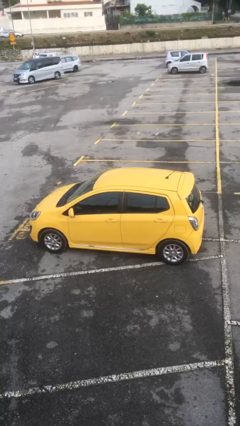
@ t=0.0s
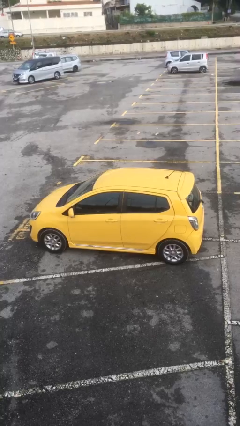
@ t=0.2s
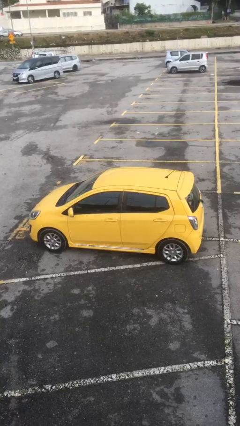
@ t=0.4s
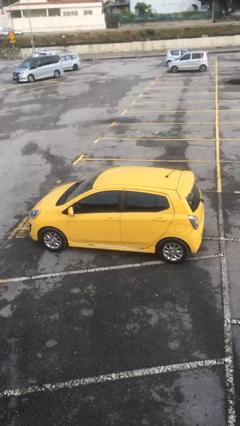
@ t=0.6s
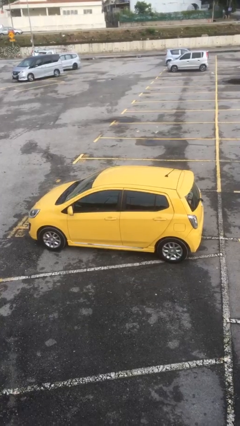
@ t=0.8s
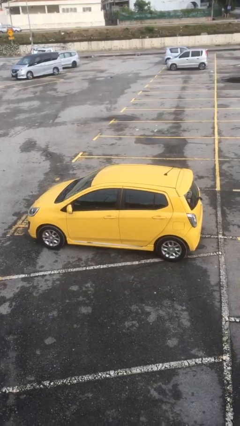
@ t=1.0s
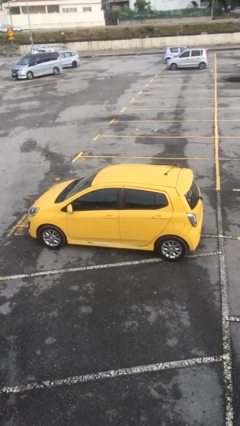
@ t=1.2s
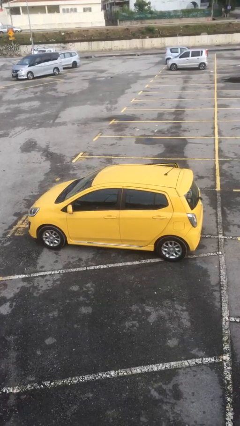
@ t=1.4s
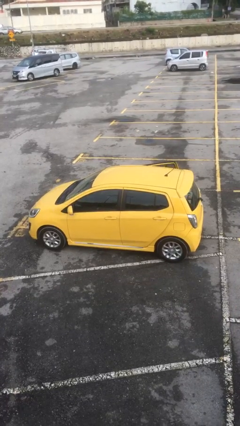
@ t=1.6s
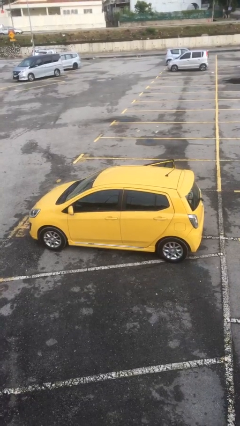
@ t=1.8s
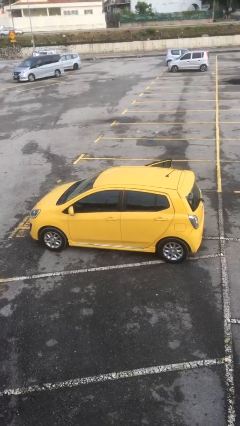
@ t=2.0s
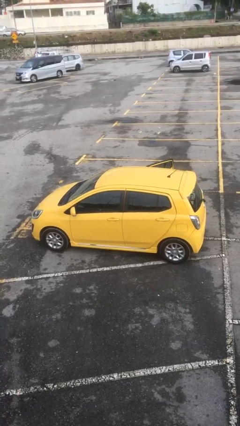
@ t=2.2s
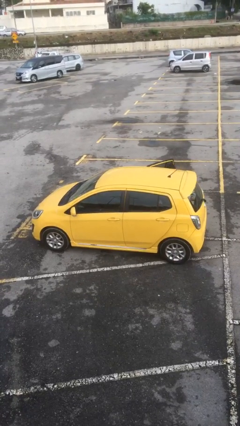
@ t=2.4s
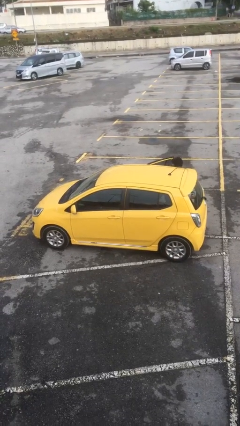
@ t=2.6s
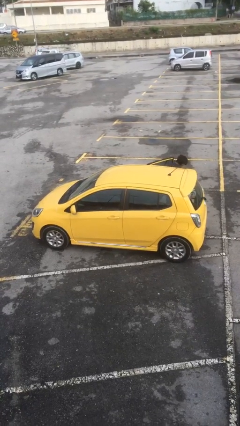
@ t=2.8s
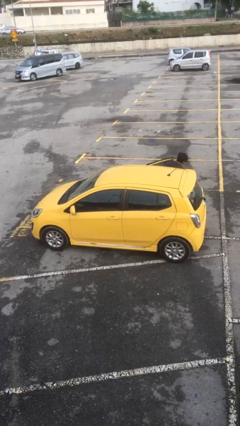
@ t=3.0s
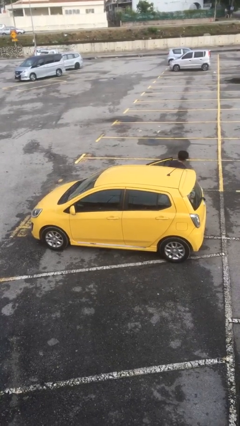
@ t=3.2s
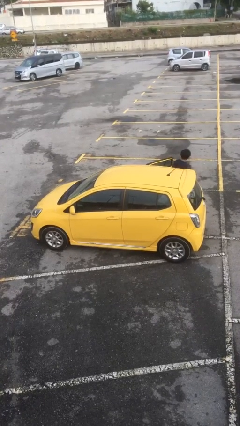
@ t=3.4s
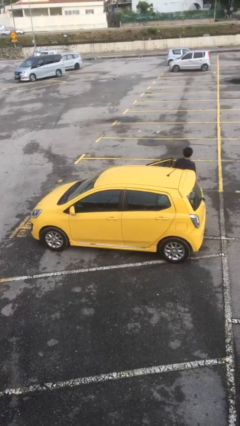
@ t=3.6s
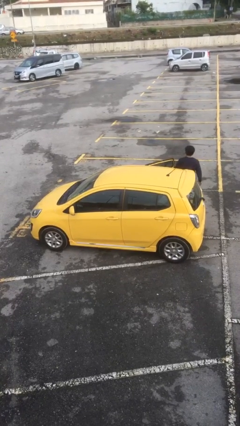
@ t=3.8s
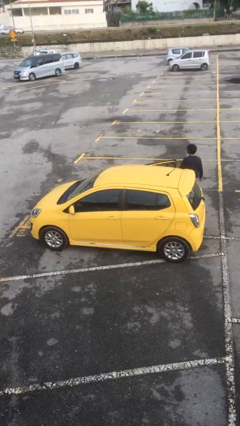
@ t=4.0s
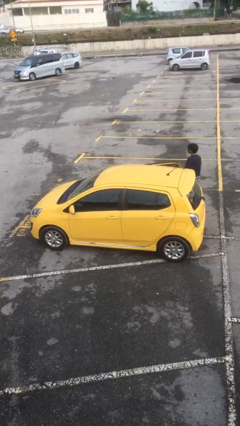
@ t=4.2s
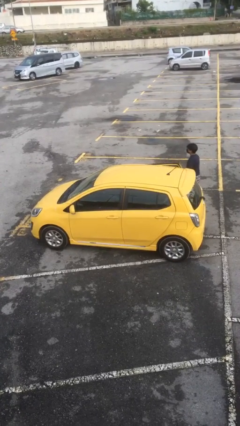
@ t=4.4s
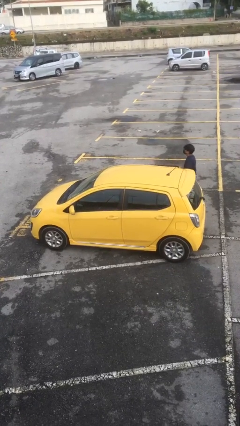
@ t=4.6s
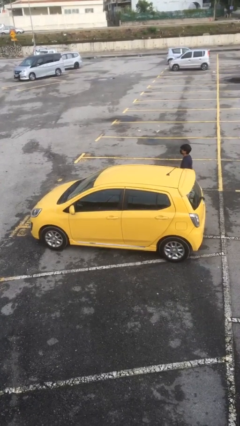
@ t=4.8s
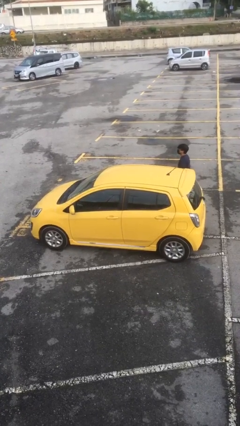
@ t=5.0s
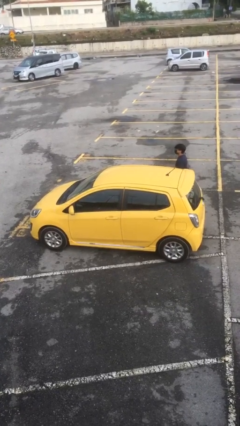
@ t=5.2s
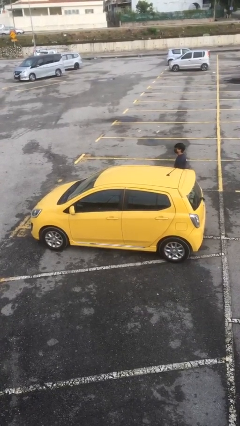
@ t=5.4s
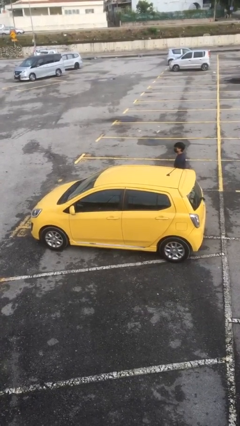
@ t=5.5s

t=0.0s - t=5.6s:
car drops off person

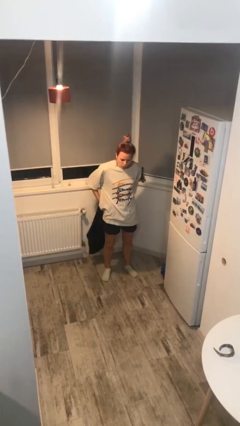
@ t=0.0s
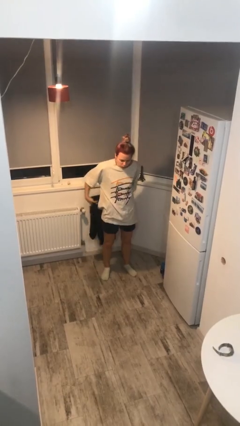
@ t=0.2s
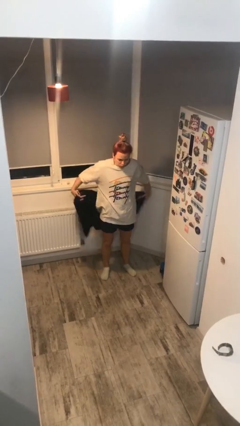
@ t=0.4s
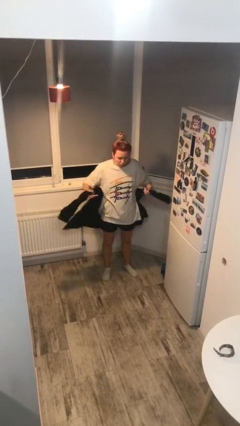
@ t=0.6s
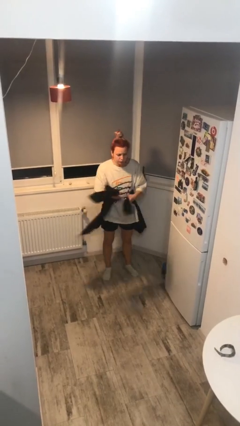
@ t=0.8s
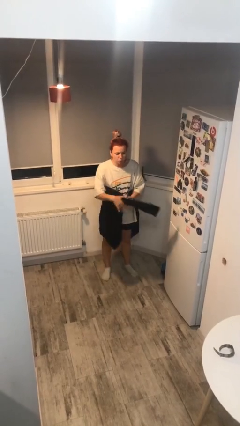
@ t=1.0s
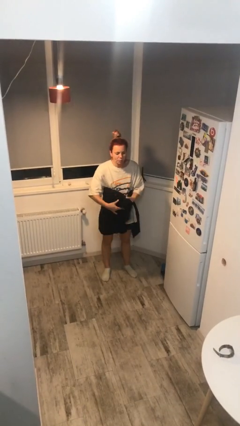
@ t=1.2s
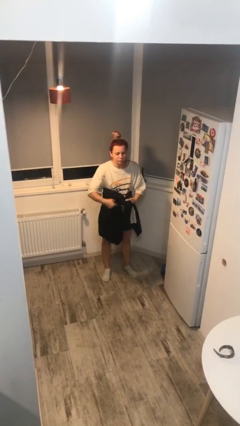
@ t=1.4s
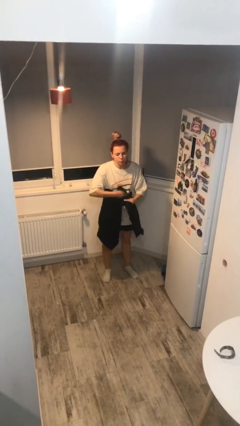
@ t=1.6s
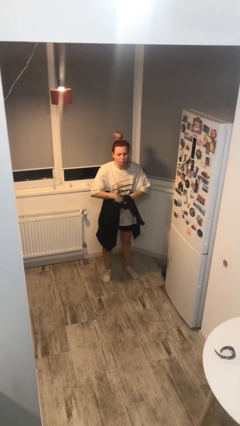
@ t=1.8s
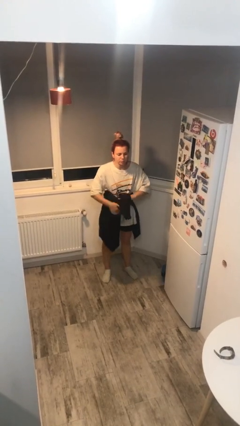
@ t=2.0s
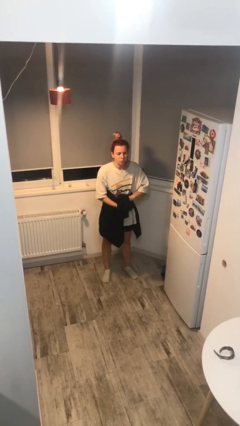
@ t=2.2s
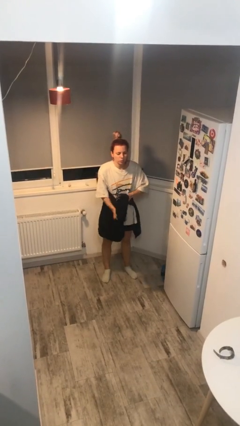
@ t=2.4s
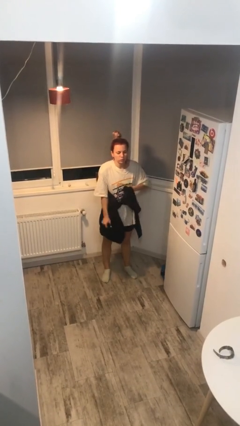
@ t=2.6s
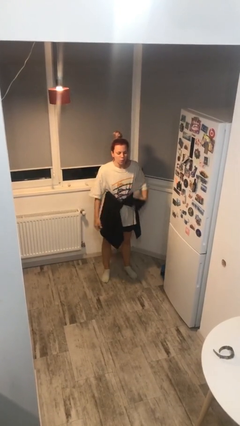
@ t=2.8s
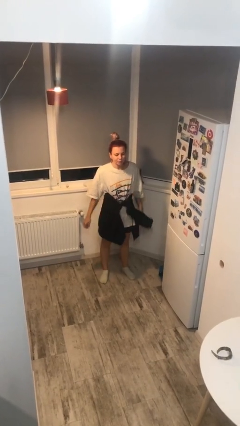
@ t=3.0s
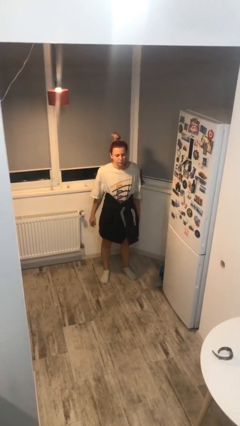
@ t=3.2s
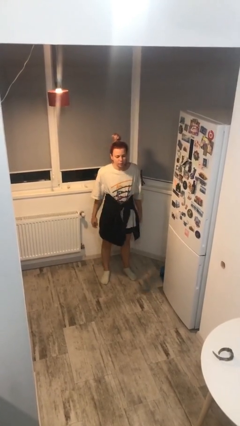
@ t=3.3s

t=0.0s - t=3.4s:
person ties jacket around waist

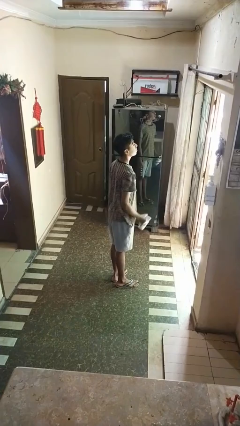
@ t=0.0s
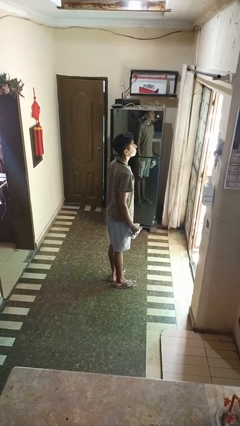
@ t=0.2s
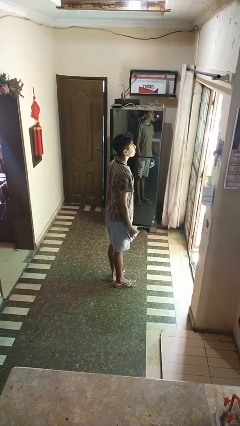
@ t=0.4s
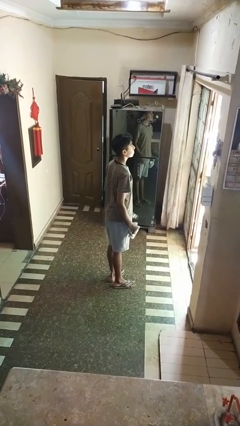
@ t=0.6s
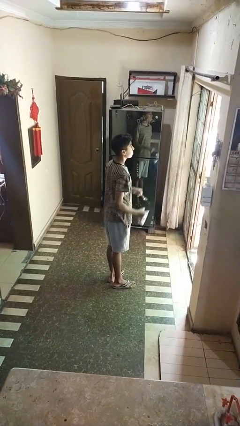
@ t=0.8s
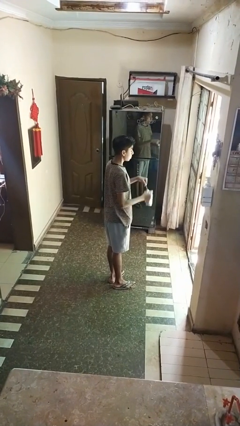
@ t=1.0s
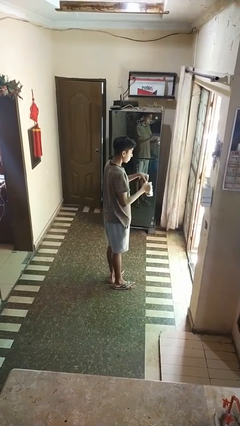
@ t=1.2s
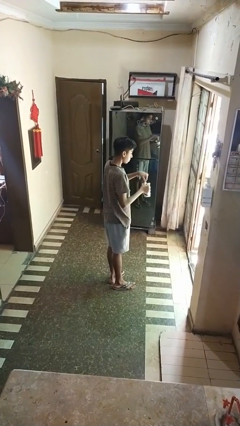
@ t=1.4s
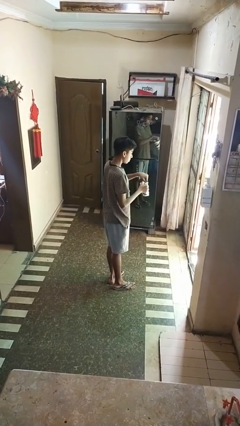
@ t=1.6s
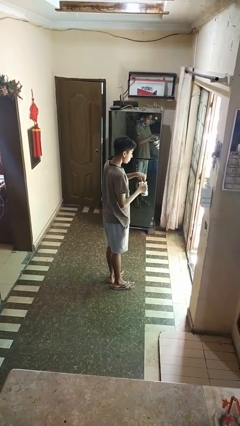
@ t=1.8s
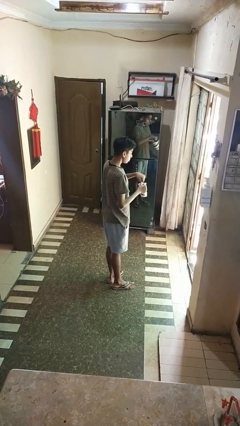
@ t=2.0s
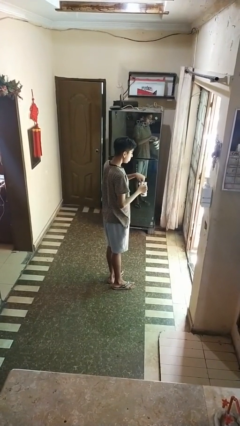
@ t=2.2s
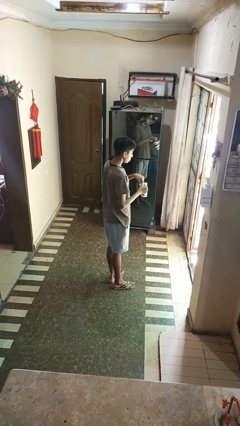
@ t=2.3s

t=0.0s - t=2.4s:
person stirs mug

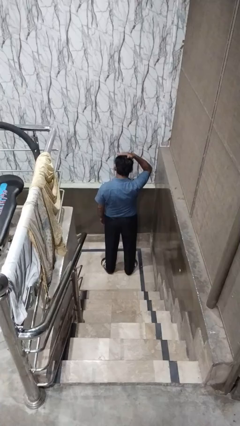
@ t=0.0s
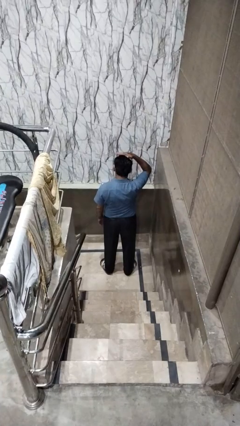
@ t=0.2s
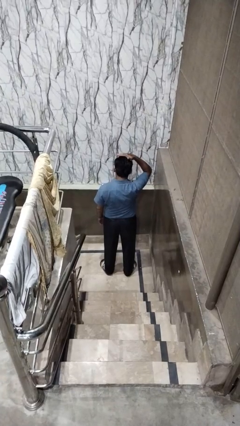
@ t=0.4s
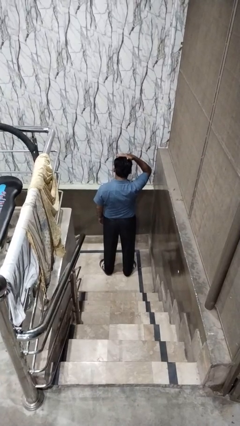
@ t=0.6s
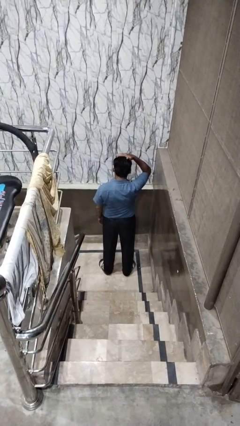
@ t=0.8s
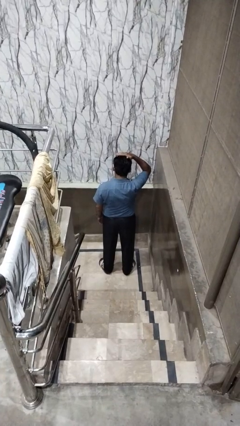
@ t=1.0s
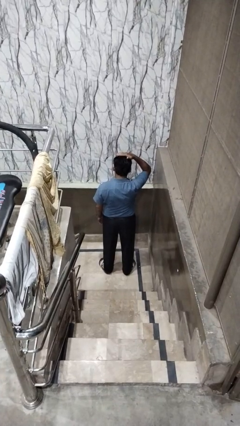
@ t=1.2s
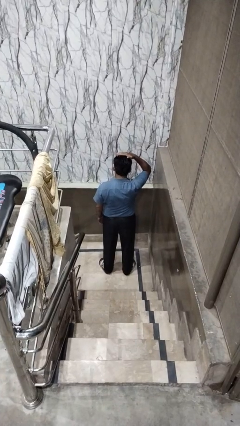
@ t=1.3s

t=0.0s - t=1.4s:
person pats head

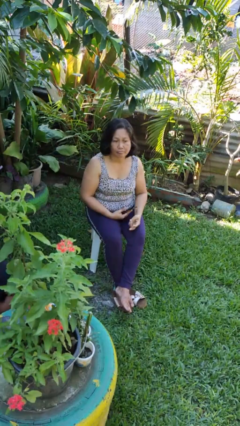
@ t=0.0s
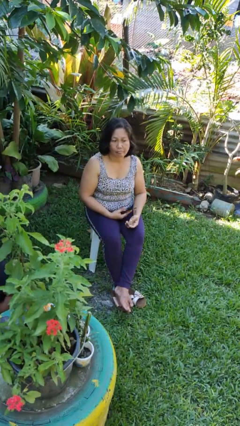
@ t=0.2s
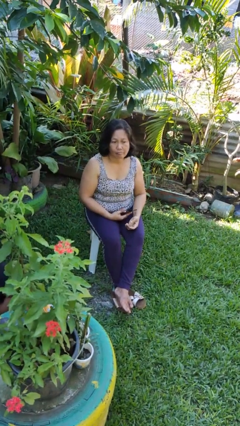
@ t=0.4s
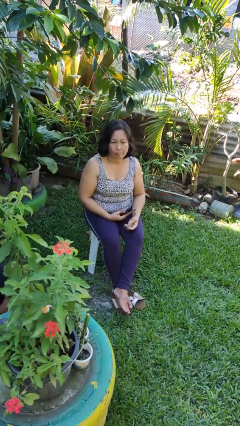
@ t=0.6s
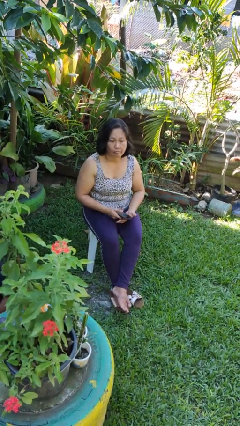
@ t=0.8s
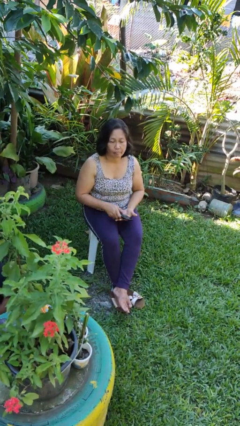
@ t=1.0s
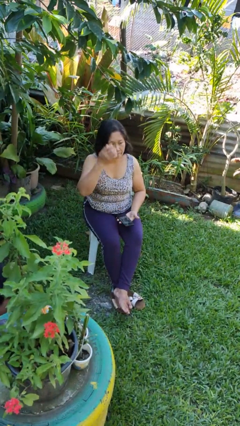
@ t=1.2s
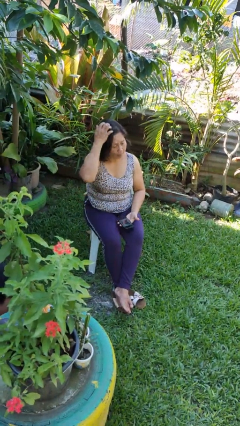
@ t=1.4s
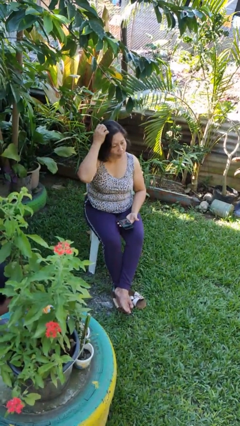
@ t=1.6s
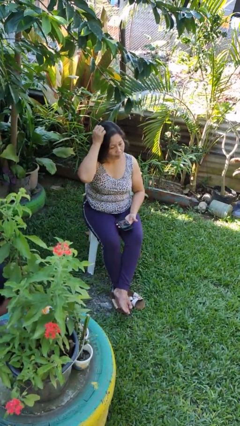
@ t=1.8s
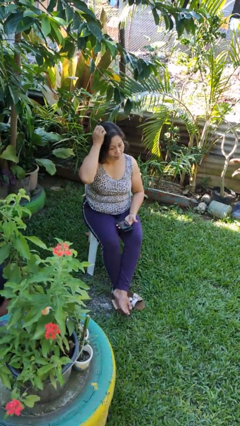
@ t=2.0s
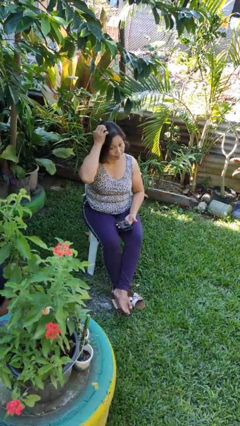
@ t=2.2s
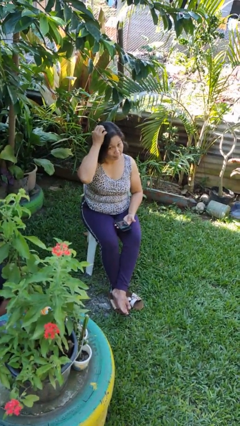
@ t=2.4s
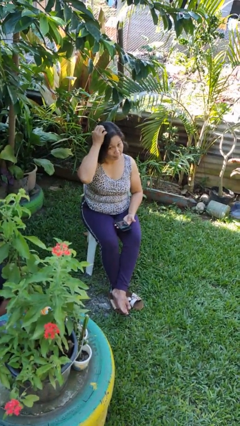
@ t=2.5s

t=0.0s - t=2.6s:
person scratches face

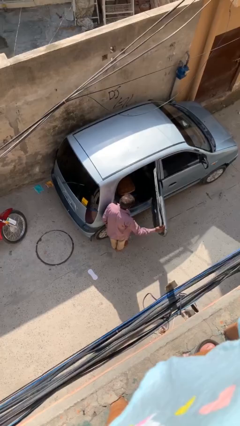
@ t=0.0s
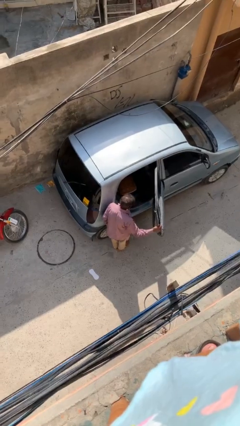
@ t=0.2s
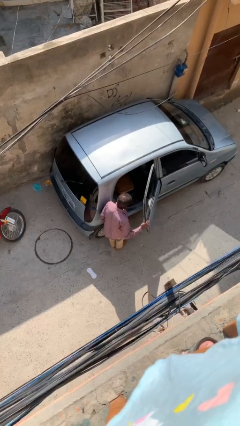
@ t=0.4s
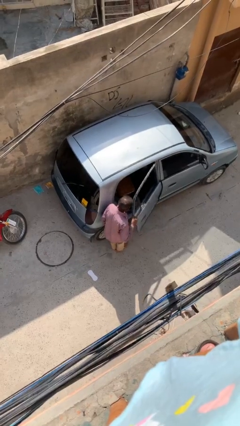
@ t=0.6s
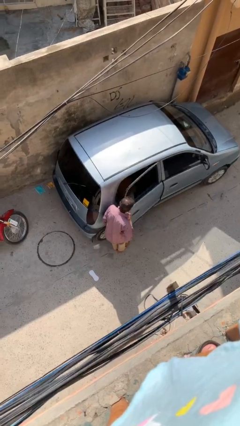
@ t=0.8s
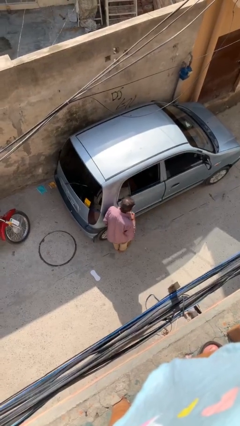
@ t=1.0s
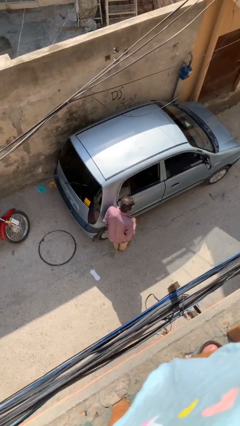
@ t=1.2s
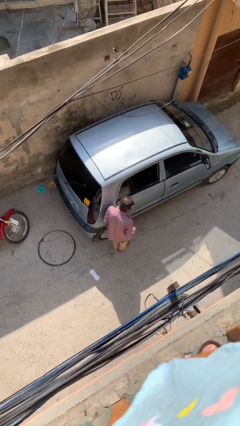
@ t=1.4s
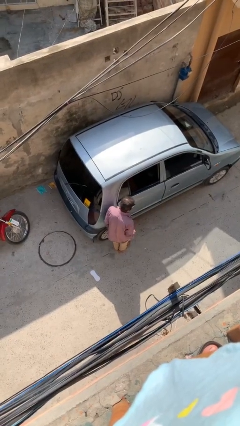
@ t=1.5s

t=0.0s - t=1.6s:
person closes car door
